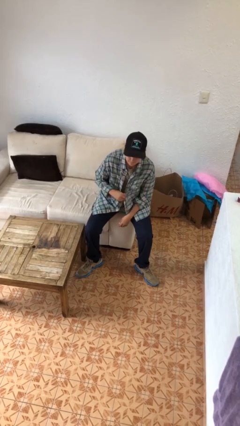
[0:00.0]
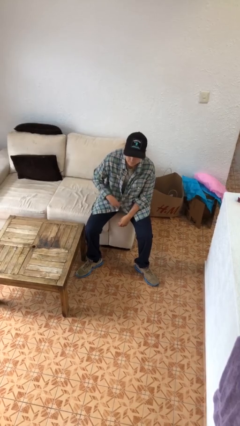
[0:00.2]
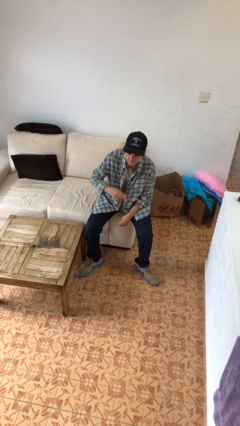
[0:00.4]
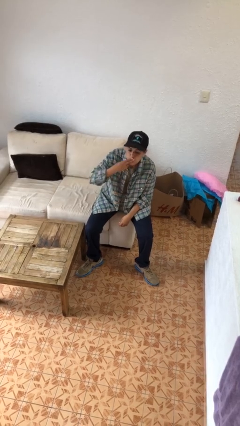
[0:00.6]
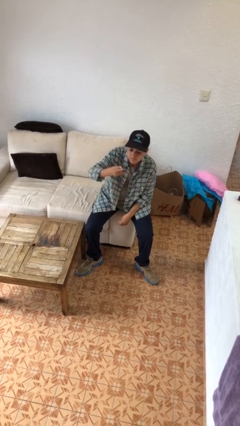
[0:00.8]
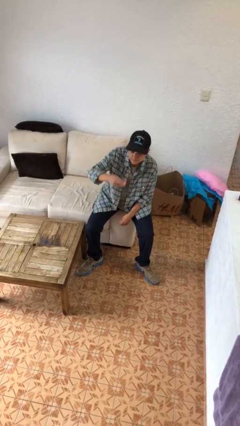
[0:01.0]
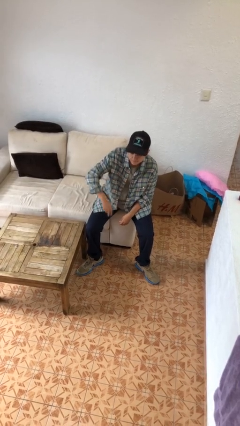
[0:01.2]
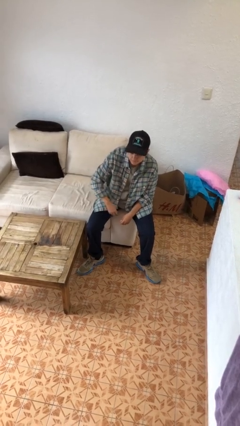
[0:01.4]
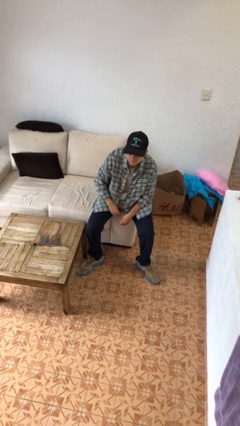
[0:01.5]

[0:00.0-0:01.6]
person gestures blow kiss

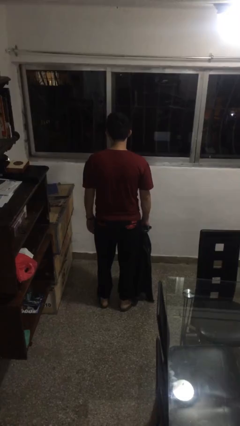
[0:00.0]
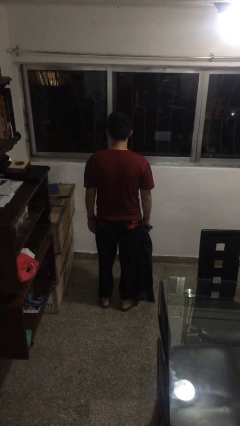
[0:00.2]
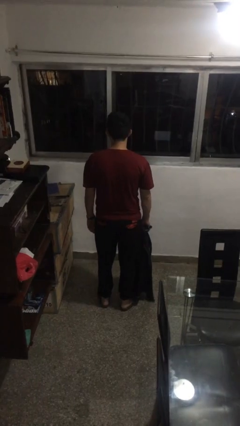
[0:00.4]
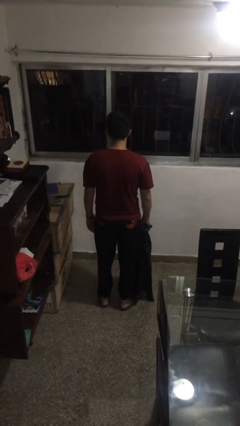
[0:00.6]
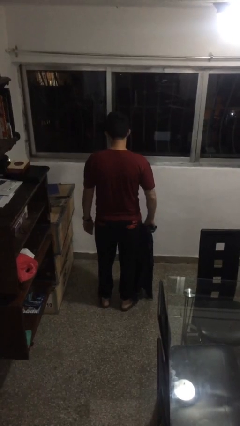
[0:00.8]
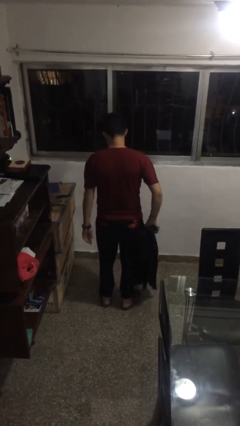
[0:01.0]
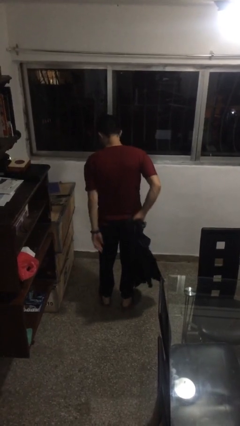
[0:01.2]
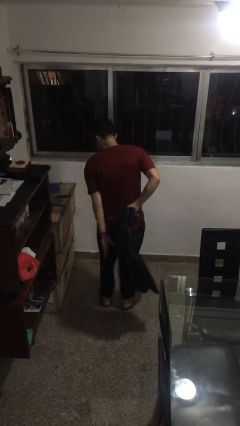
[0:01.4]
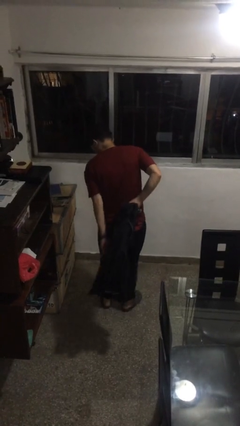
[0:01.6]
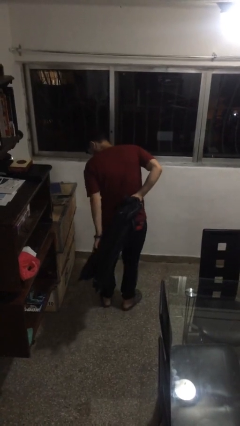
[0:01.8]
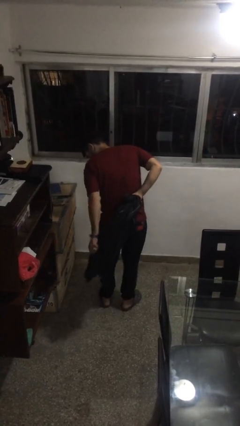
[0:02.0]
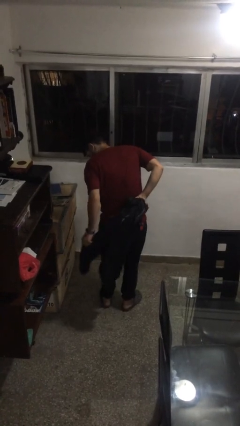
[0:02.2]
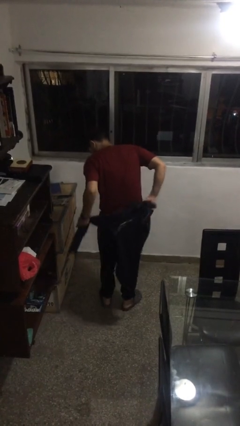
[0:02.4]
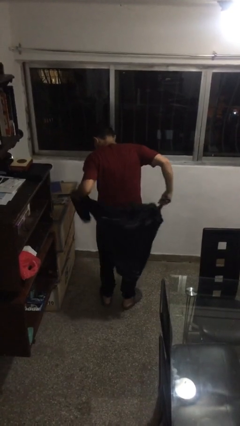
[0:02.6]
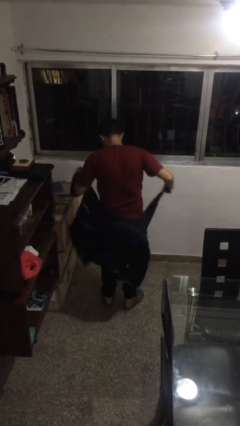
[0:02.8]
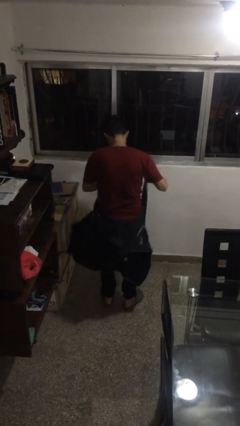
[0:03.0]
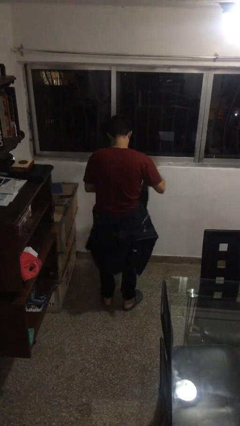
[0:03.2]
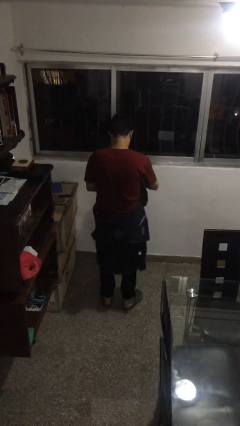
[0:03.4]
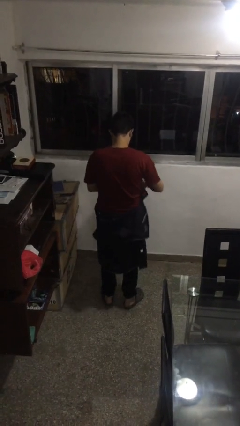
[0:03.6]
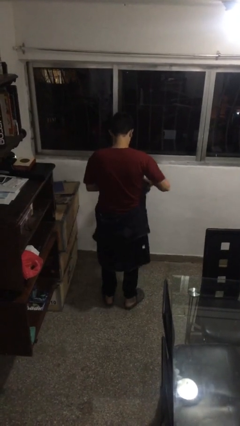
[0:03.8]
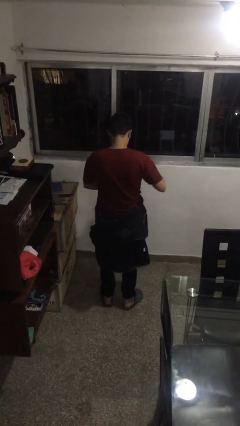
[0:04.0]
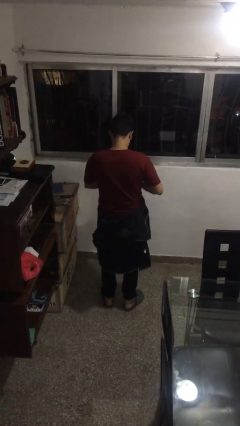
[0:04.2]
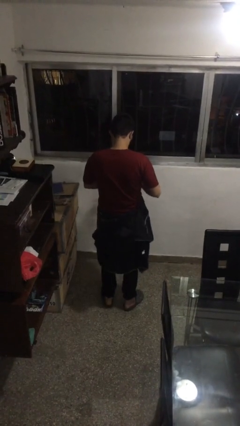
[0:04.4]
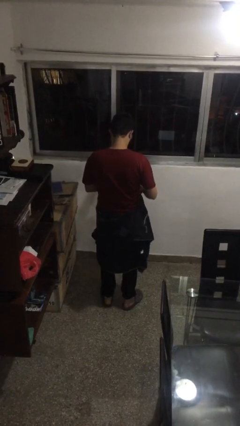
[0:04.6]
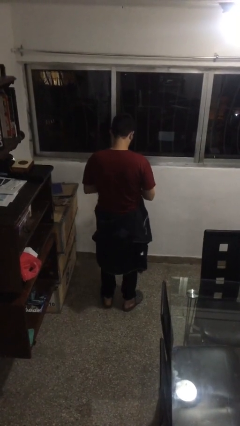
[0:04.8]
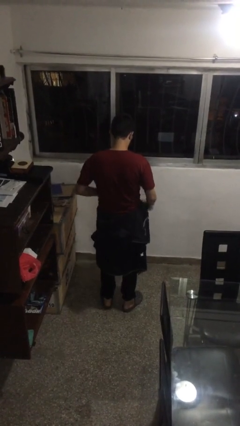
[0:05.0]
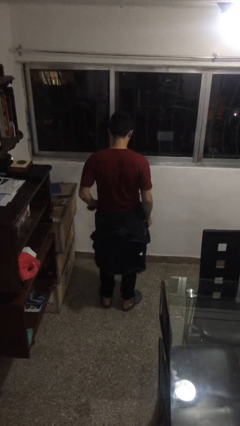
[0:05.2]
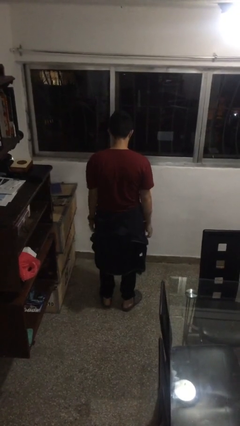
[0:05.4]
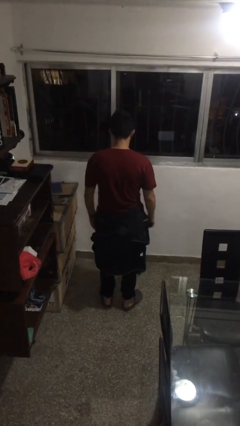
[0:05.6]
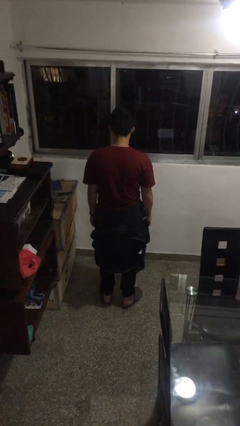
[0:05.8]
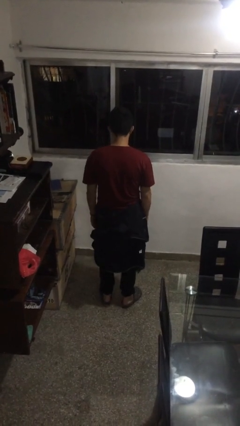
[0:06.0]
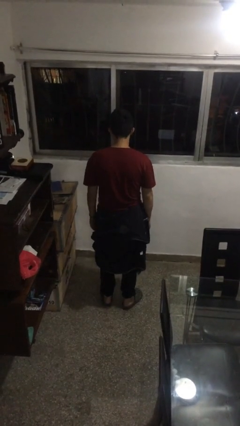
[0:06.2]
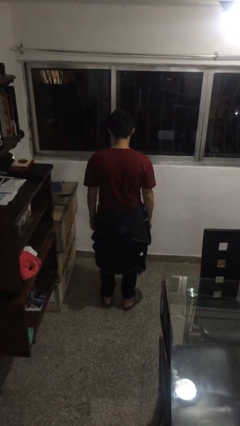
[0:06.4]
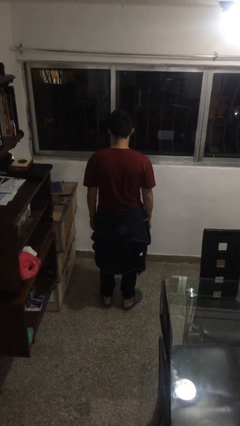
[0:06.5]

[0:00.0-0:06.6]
person ties jacket around waist

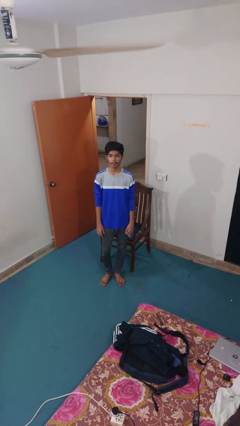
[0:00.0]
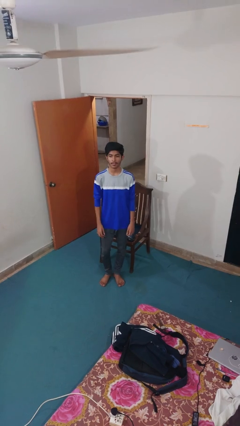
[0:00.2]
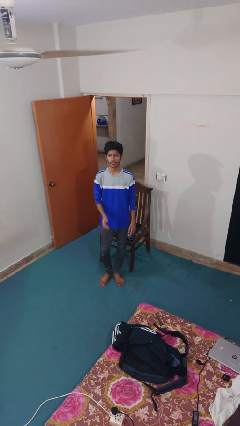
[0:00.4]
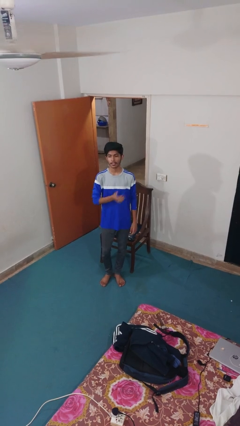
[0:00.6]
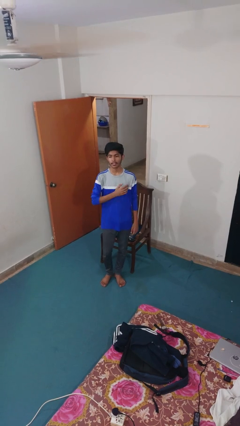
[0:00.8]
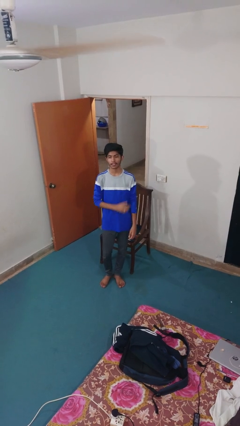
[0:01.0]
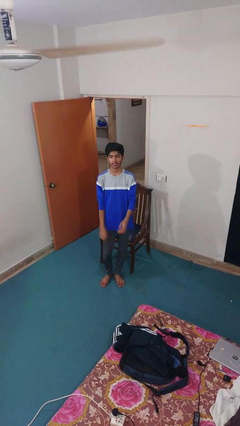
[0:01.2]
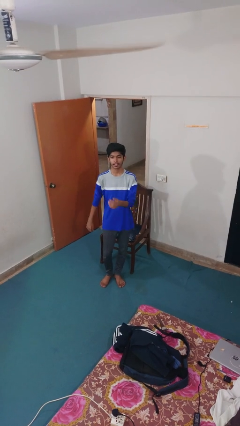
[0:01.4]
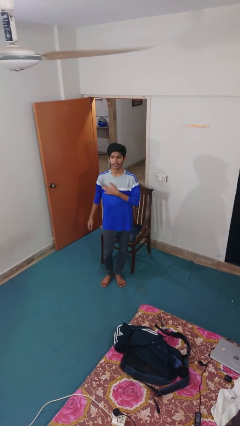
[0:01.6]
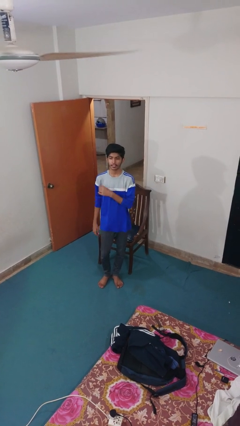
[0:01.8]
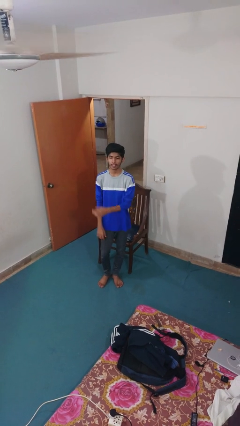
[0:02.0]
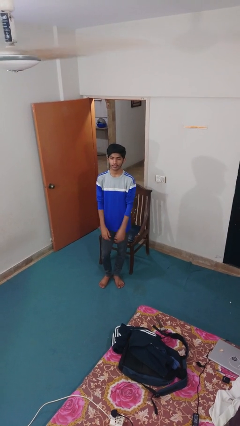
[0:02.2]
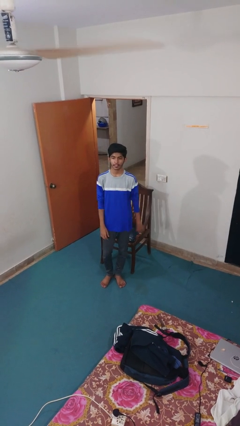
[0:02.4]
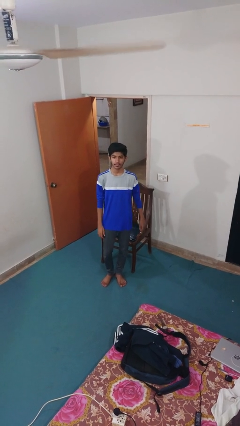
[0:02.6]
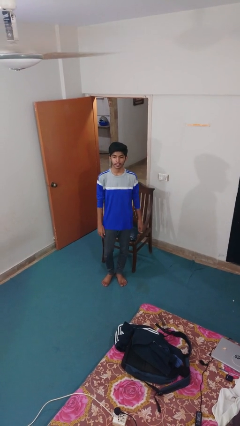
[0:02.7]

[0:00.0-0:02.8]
person drums on chest

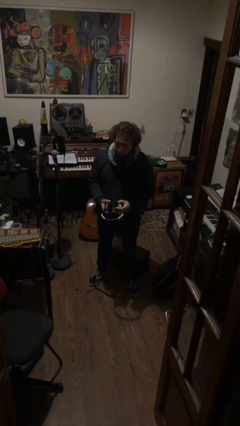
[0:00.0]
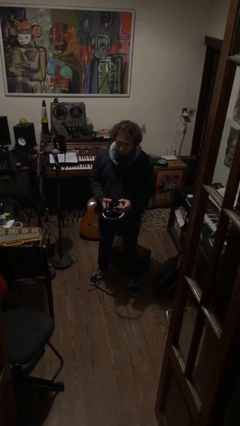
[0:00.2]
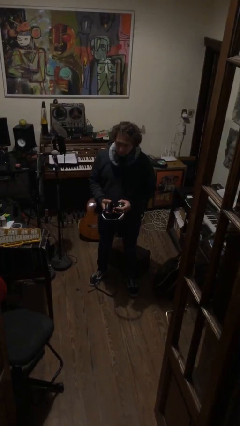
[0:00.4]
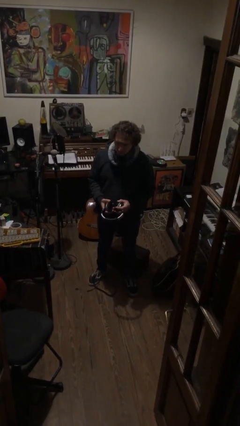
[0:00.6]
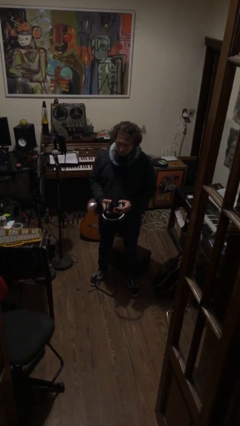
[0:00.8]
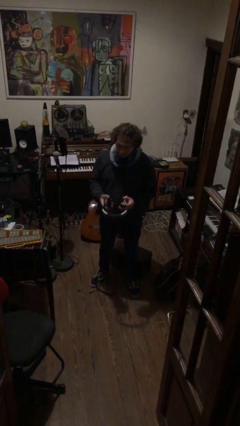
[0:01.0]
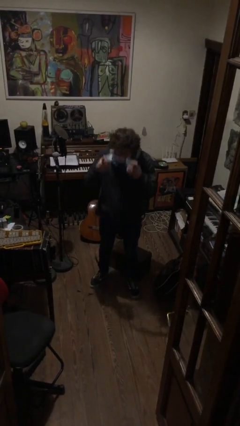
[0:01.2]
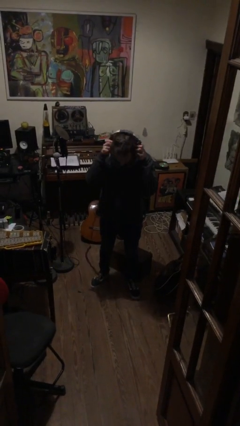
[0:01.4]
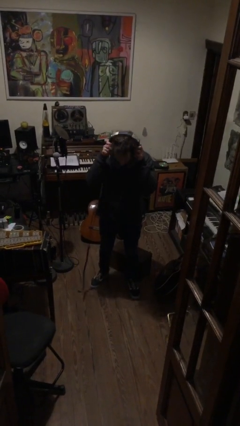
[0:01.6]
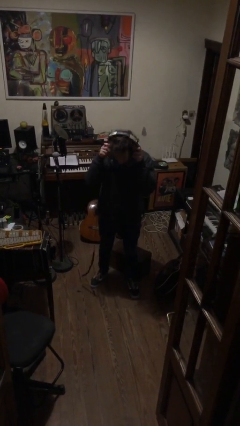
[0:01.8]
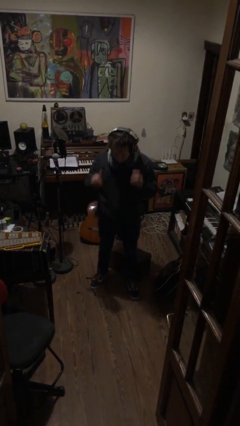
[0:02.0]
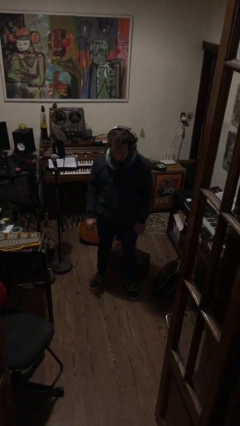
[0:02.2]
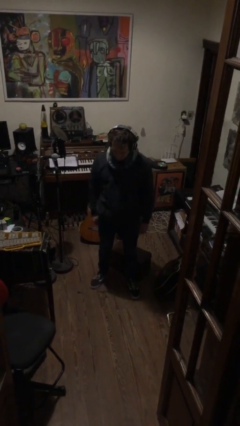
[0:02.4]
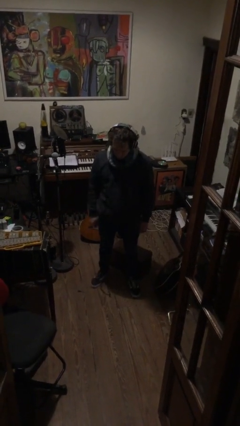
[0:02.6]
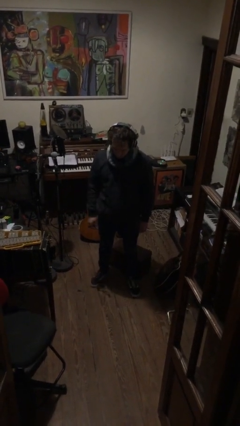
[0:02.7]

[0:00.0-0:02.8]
person puts on headphones

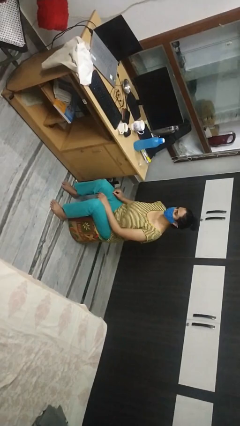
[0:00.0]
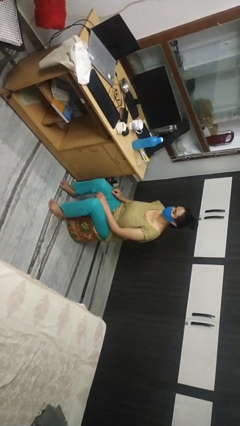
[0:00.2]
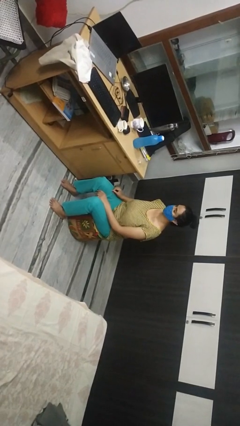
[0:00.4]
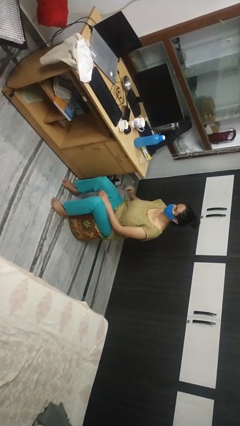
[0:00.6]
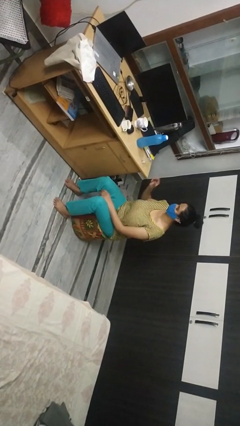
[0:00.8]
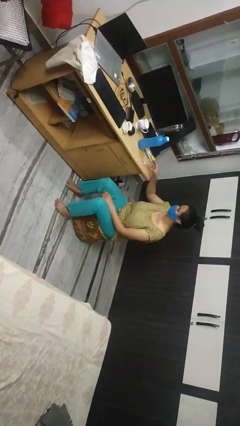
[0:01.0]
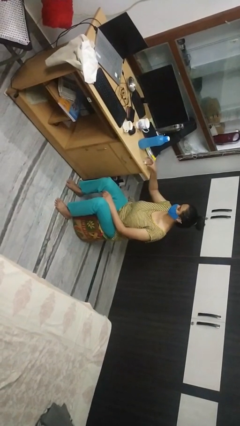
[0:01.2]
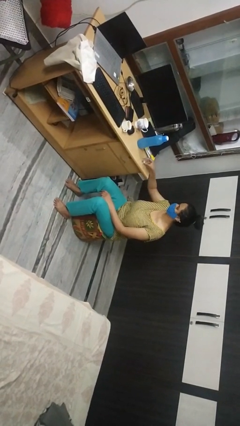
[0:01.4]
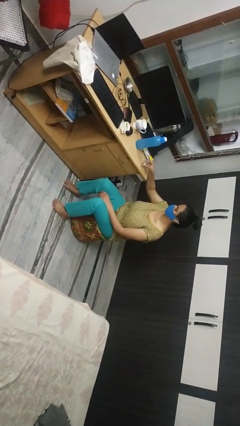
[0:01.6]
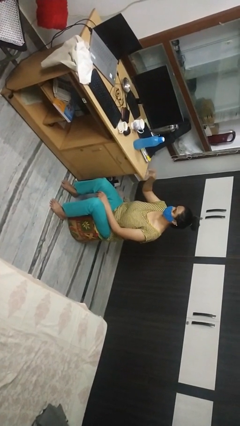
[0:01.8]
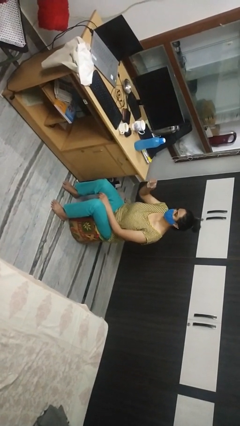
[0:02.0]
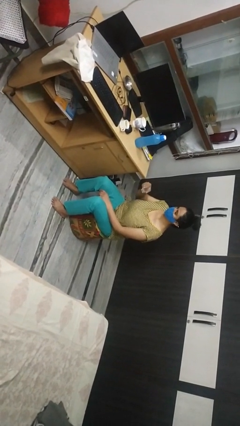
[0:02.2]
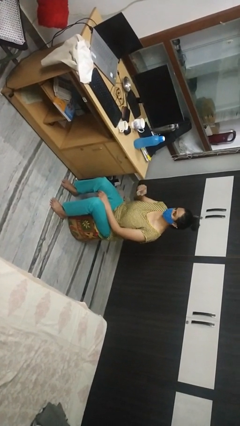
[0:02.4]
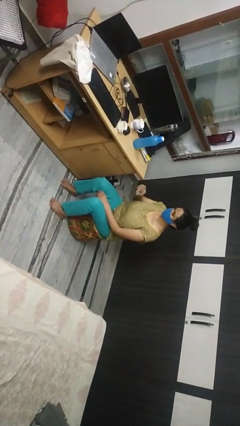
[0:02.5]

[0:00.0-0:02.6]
person picks up object from table

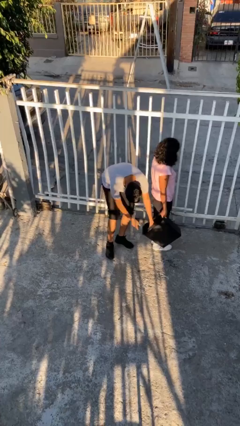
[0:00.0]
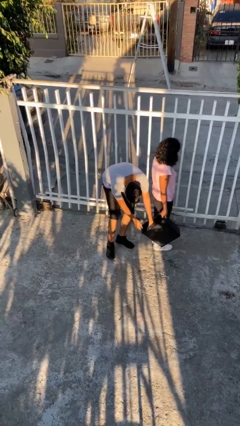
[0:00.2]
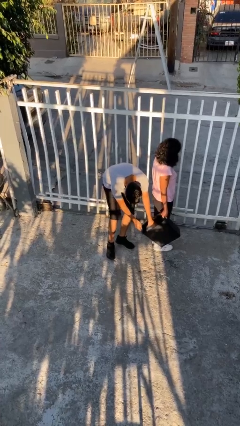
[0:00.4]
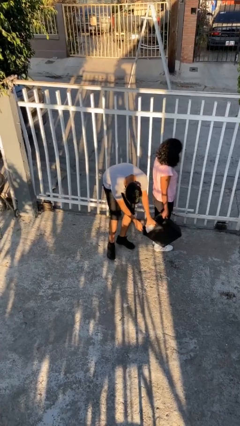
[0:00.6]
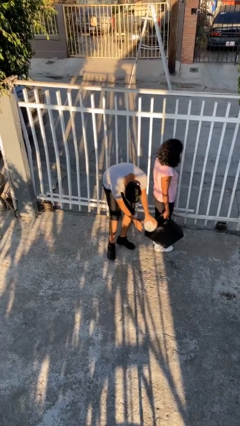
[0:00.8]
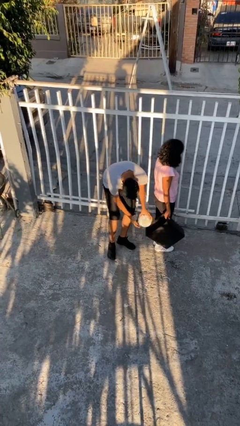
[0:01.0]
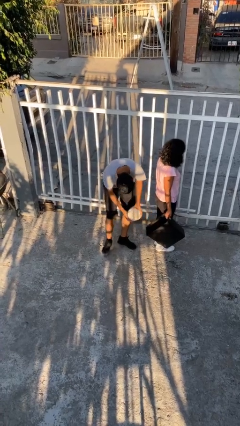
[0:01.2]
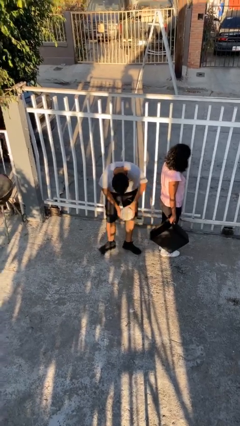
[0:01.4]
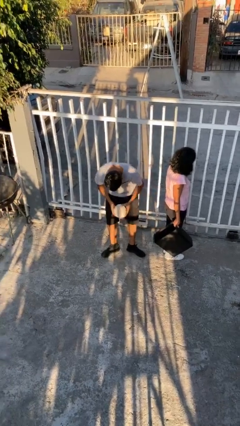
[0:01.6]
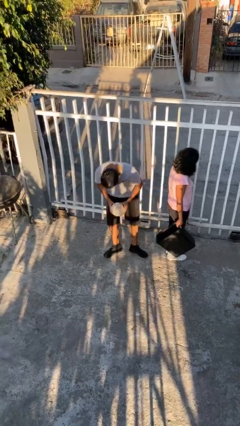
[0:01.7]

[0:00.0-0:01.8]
person steals object from person
